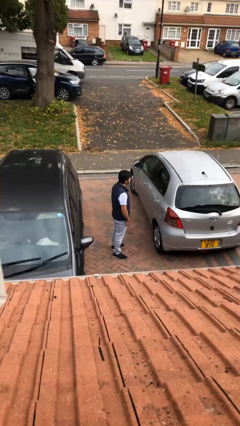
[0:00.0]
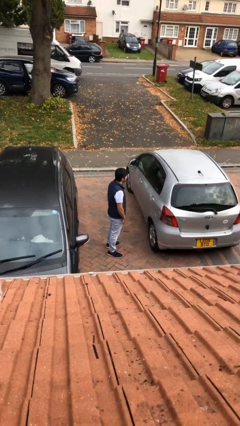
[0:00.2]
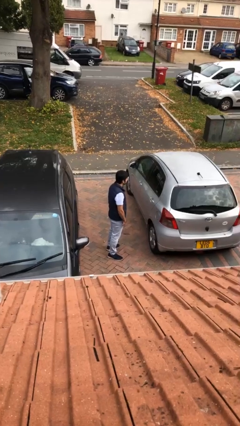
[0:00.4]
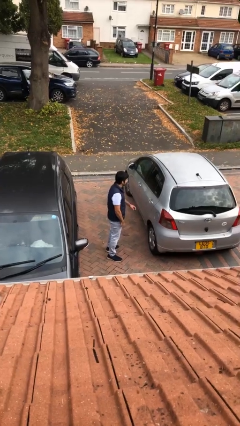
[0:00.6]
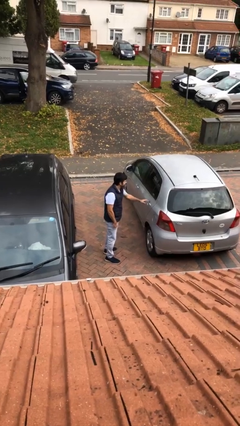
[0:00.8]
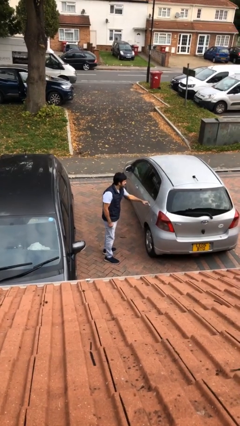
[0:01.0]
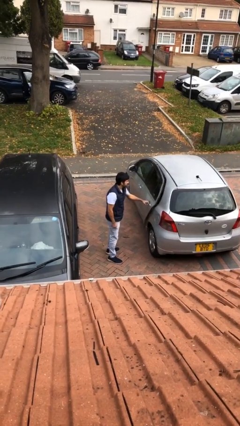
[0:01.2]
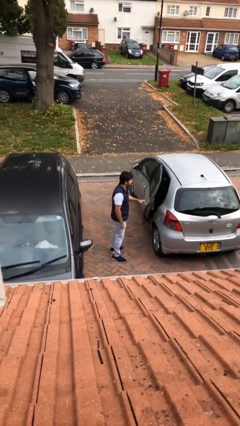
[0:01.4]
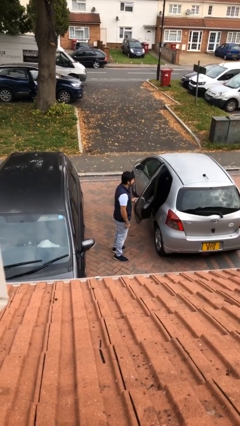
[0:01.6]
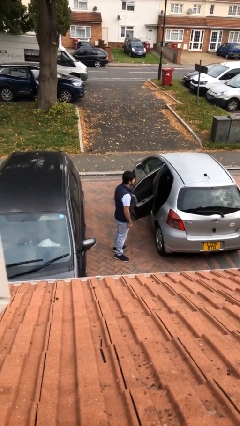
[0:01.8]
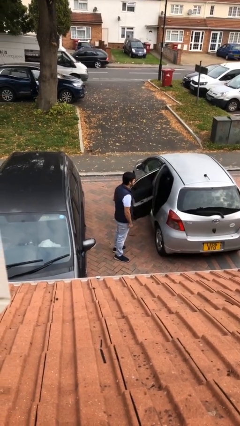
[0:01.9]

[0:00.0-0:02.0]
person opens car door

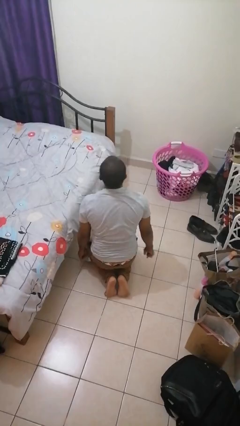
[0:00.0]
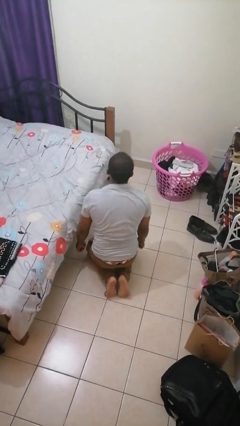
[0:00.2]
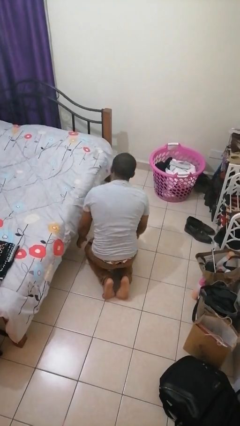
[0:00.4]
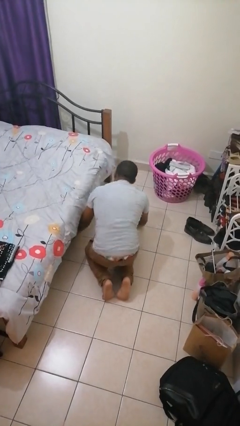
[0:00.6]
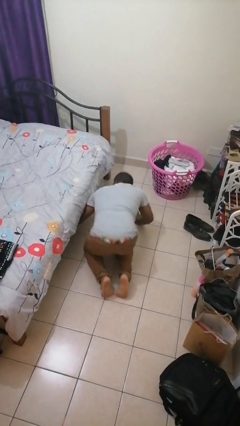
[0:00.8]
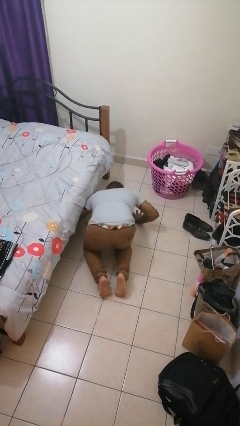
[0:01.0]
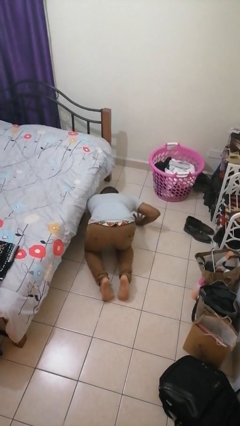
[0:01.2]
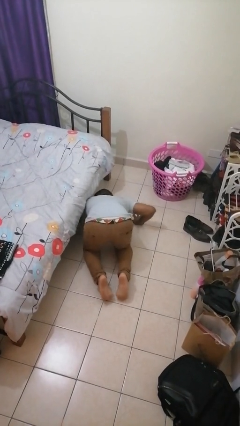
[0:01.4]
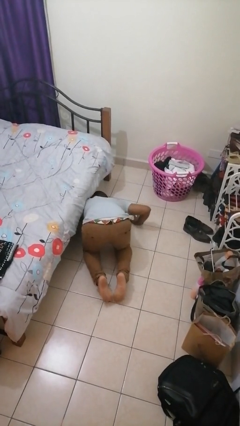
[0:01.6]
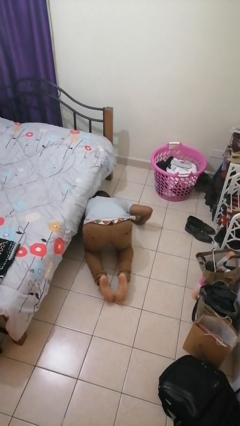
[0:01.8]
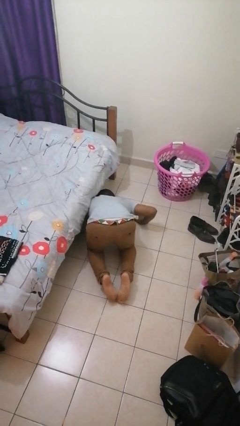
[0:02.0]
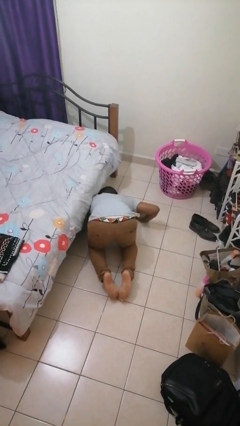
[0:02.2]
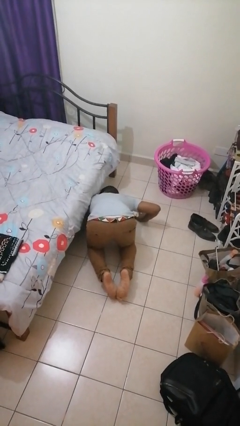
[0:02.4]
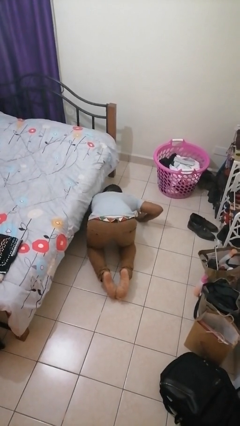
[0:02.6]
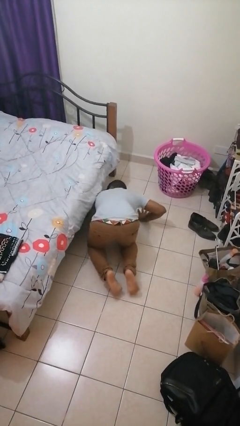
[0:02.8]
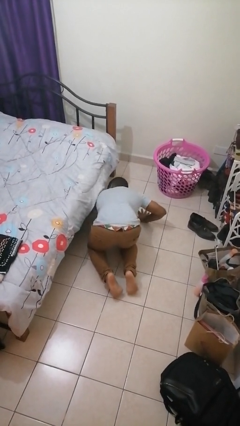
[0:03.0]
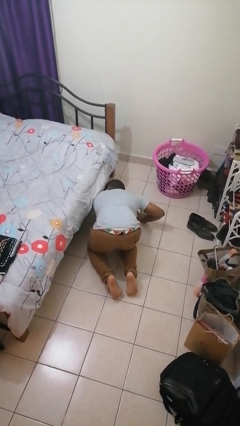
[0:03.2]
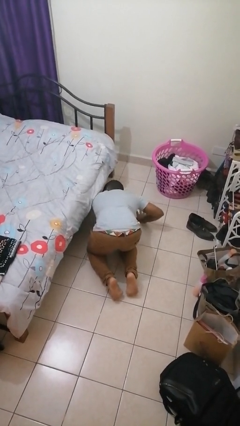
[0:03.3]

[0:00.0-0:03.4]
person searches under bed

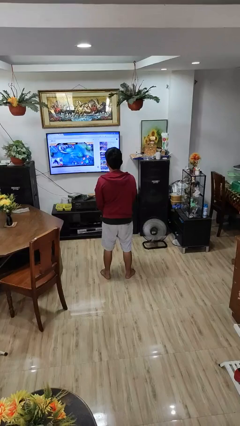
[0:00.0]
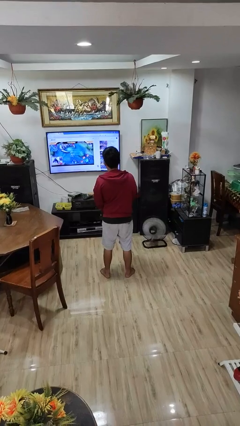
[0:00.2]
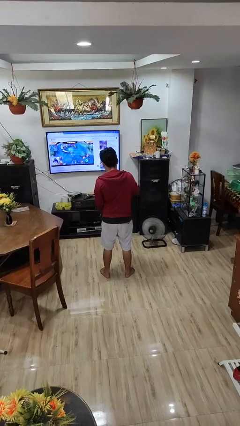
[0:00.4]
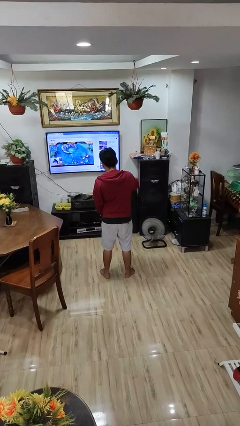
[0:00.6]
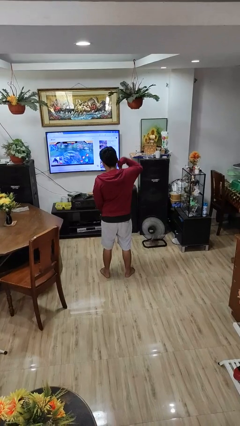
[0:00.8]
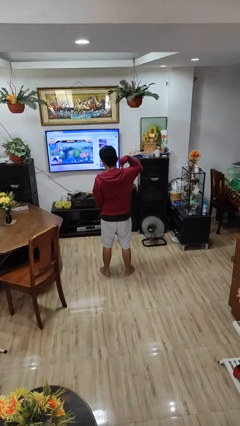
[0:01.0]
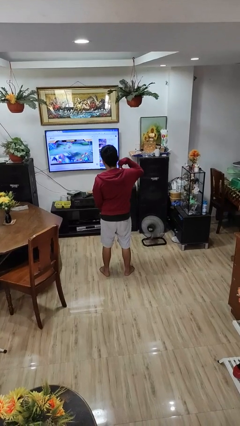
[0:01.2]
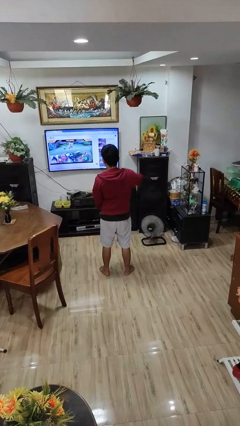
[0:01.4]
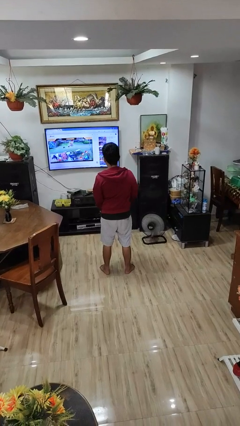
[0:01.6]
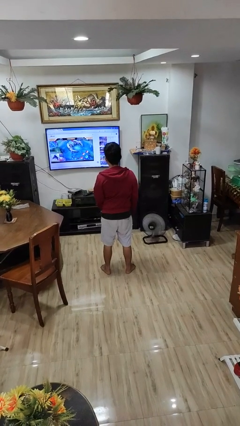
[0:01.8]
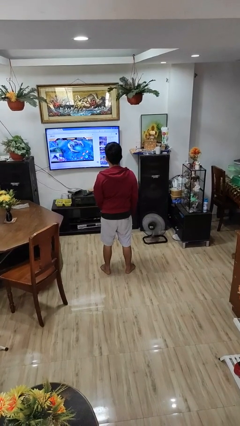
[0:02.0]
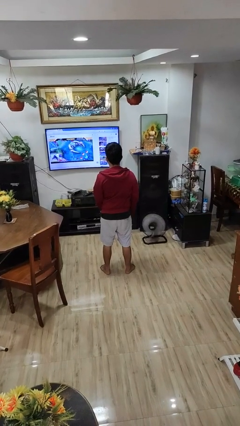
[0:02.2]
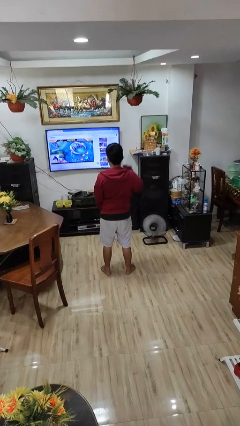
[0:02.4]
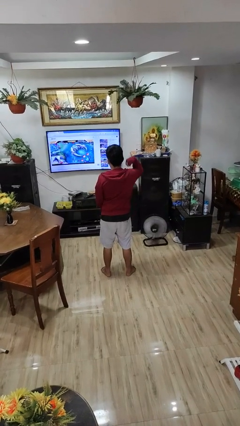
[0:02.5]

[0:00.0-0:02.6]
person zips up jacket

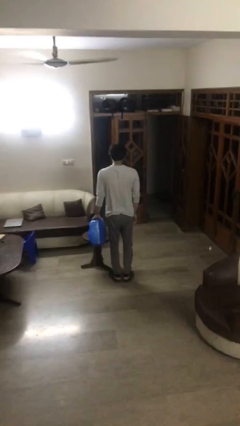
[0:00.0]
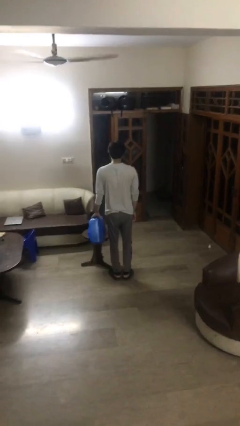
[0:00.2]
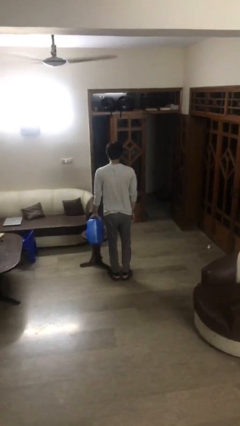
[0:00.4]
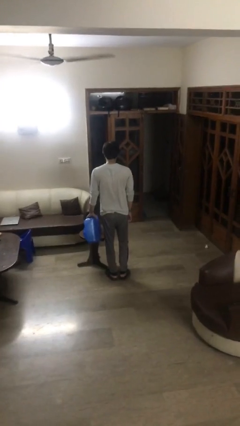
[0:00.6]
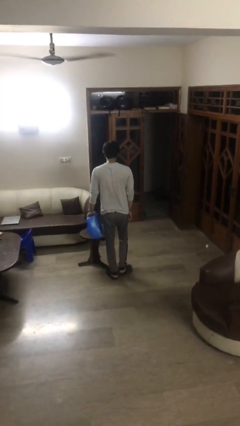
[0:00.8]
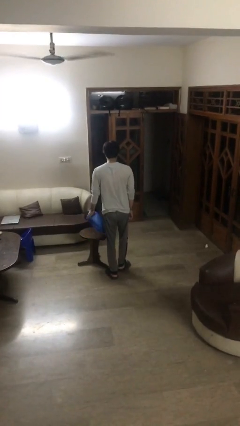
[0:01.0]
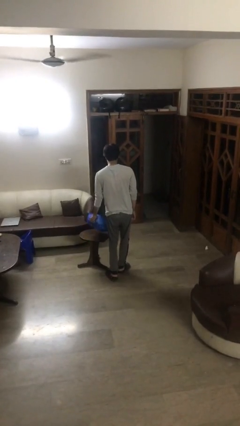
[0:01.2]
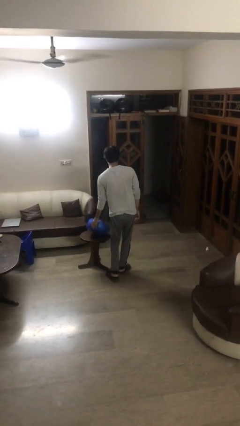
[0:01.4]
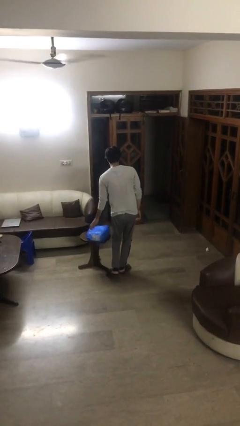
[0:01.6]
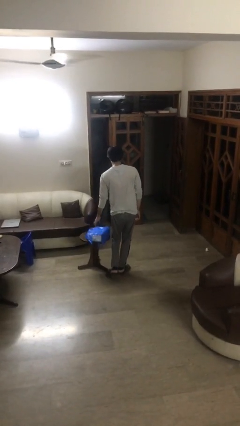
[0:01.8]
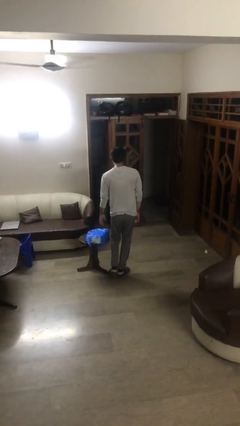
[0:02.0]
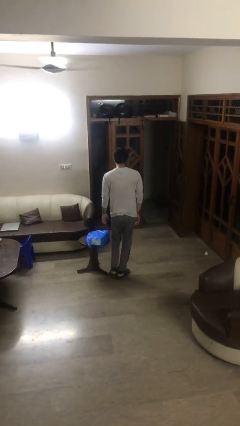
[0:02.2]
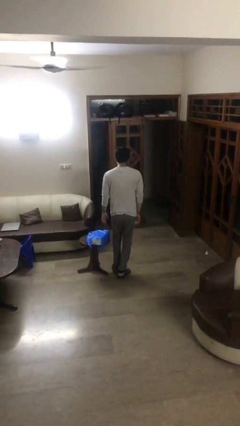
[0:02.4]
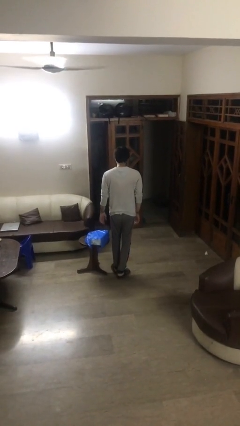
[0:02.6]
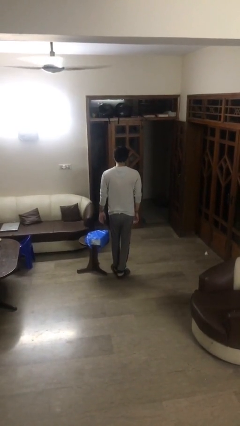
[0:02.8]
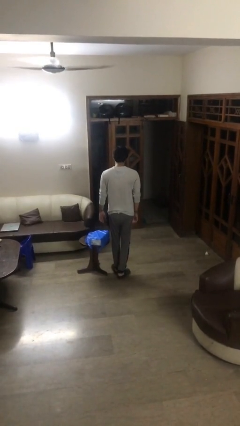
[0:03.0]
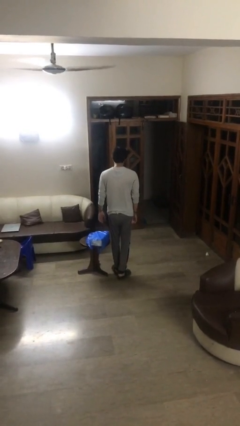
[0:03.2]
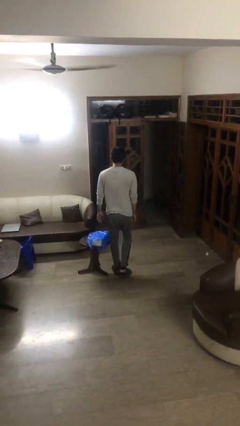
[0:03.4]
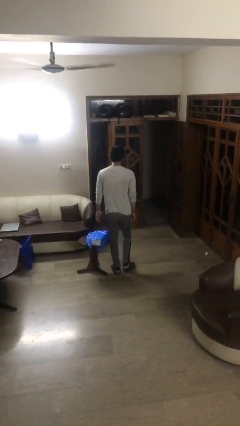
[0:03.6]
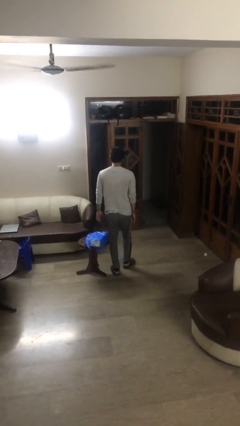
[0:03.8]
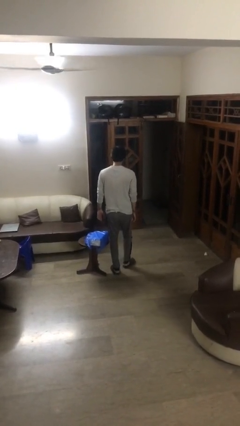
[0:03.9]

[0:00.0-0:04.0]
person puts down object on table

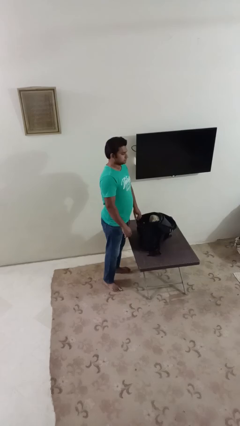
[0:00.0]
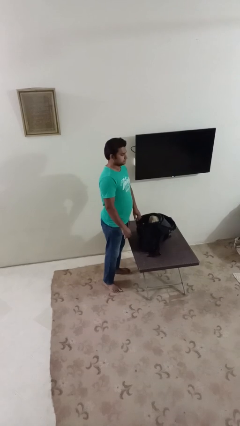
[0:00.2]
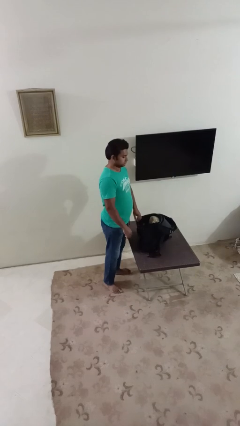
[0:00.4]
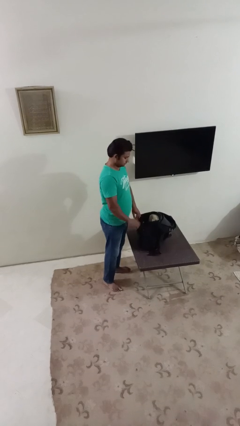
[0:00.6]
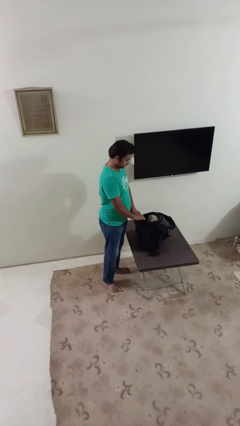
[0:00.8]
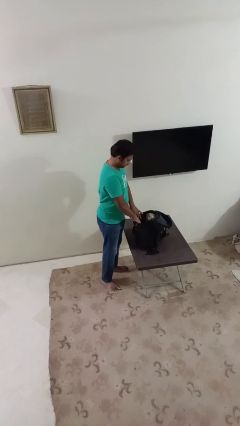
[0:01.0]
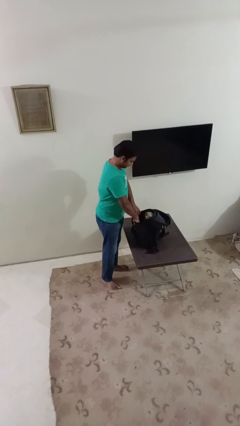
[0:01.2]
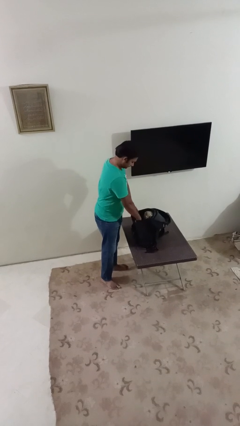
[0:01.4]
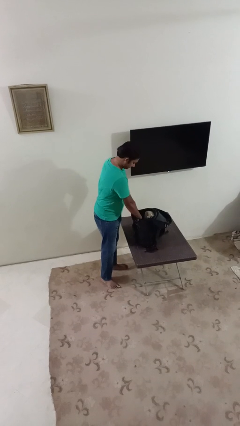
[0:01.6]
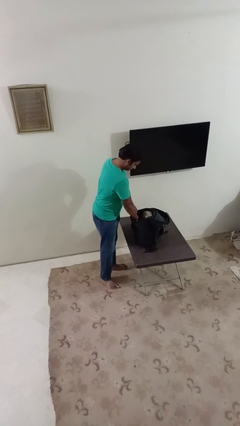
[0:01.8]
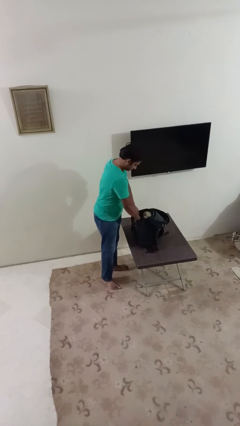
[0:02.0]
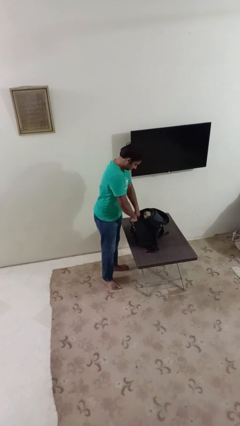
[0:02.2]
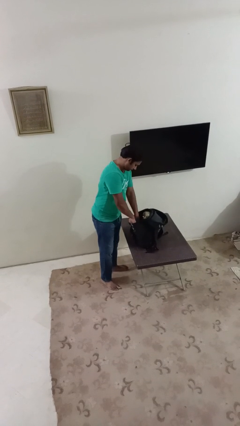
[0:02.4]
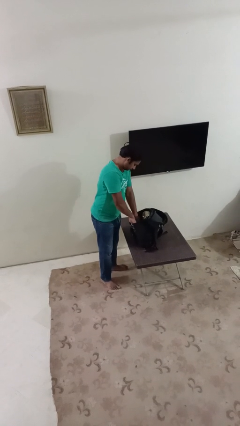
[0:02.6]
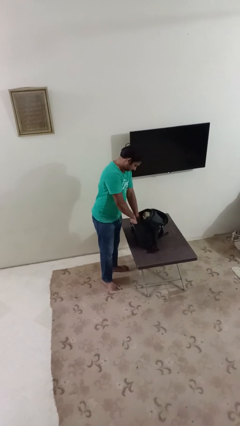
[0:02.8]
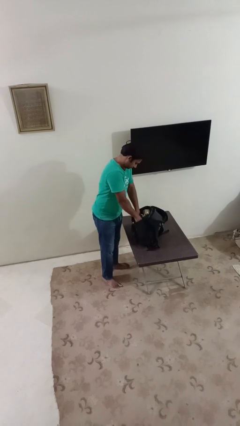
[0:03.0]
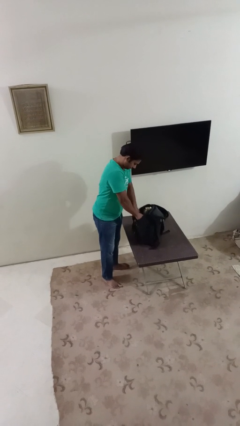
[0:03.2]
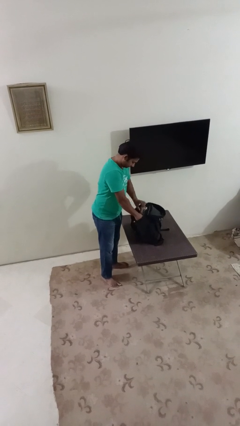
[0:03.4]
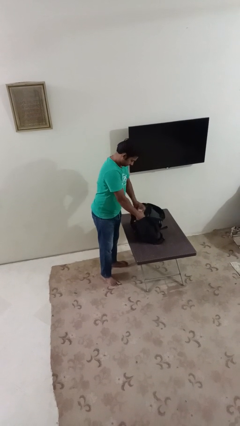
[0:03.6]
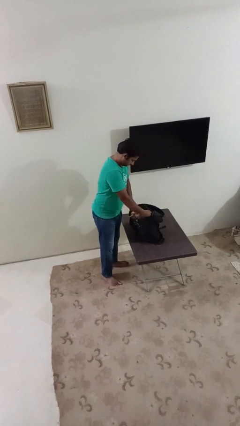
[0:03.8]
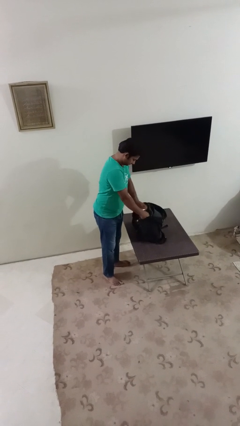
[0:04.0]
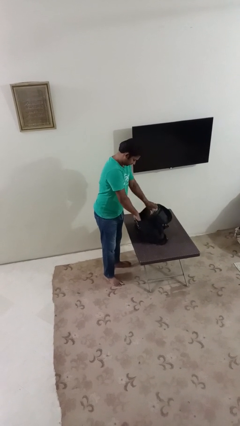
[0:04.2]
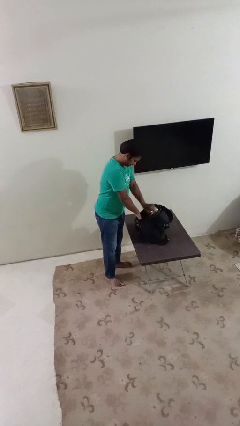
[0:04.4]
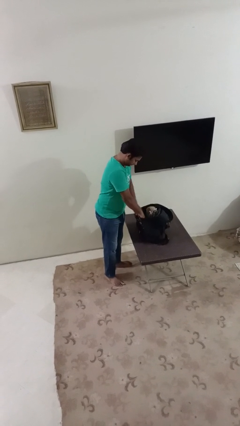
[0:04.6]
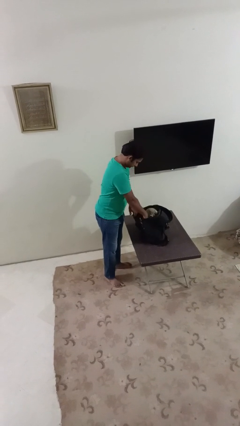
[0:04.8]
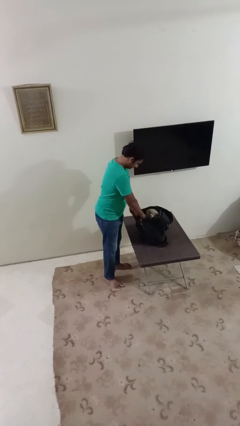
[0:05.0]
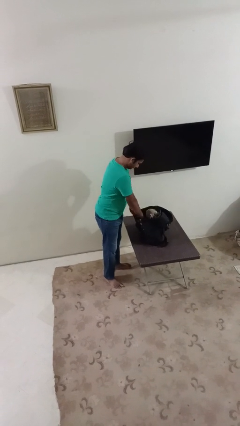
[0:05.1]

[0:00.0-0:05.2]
person searches in backpack
